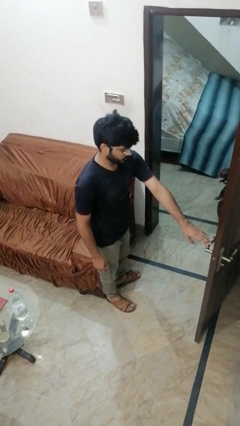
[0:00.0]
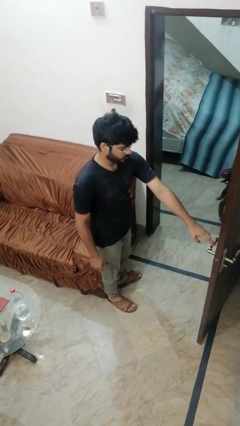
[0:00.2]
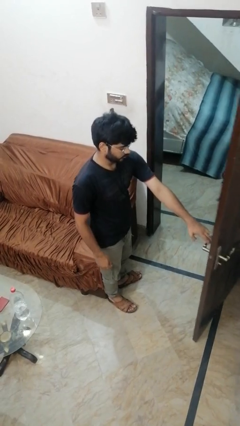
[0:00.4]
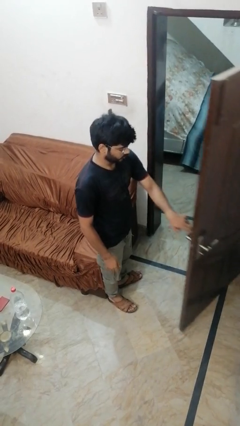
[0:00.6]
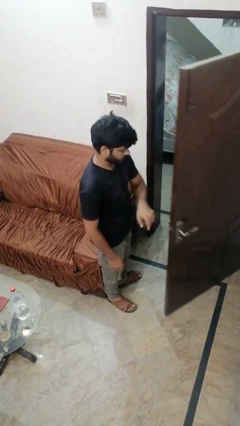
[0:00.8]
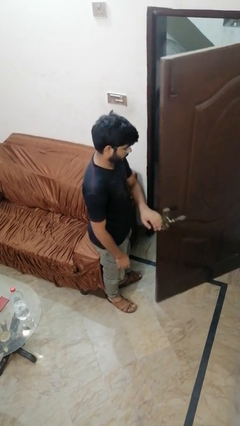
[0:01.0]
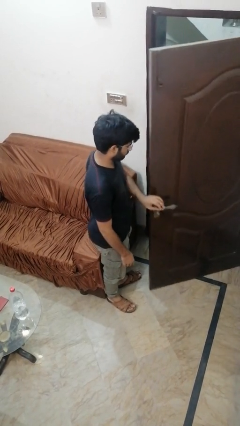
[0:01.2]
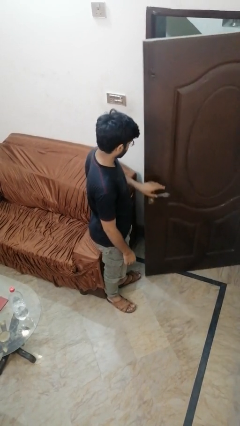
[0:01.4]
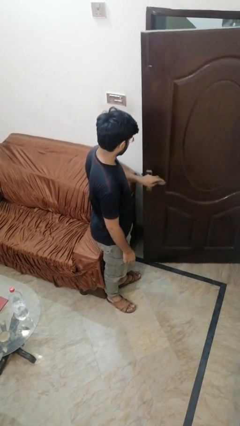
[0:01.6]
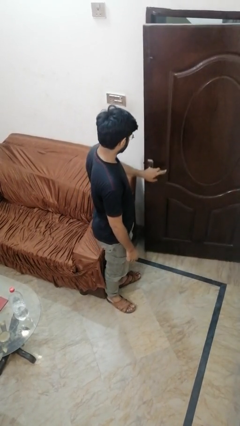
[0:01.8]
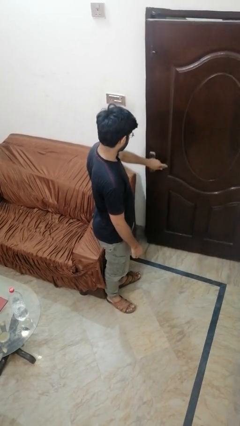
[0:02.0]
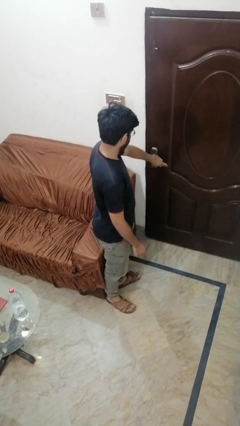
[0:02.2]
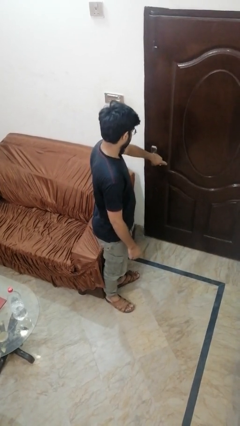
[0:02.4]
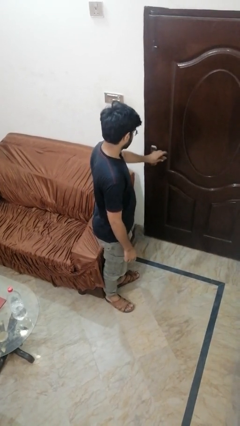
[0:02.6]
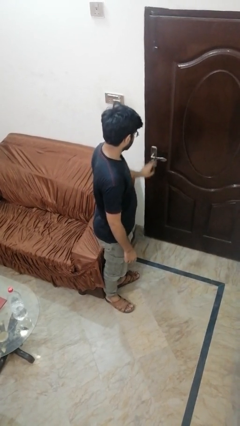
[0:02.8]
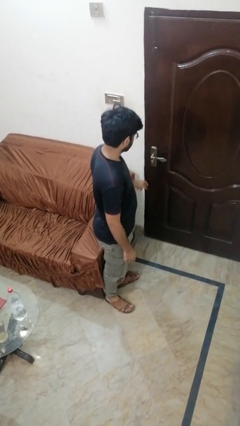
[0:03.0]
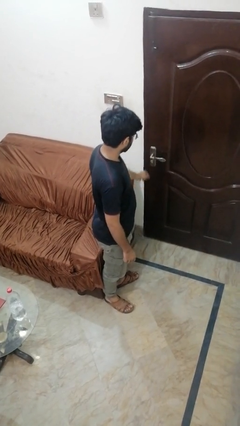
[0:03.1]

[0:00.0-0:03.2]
person closes facility door

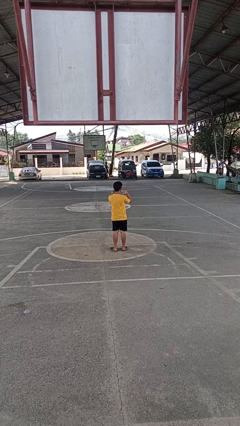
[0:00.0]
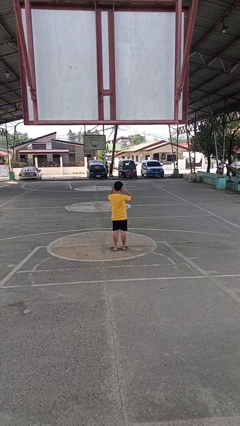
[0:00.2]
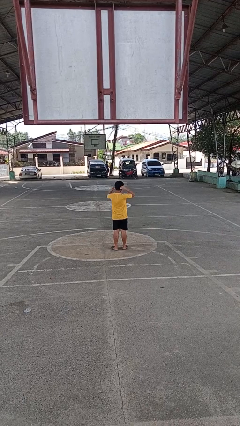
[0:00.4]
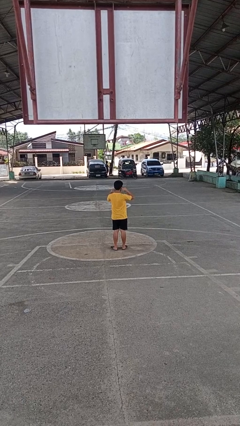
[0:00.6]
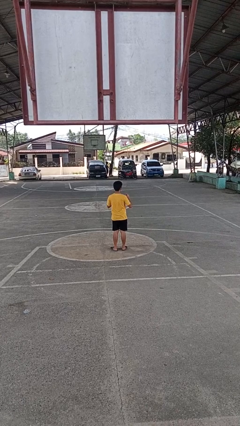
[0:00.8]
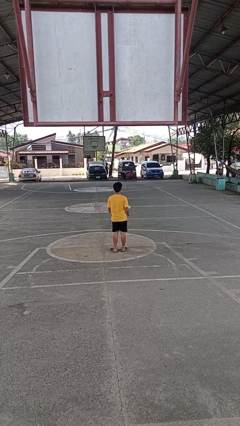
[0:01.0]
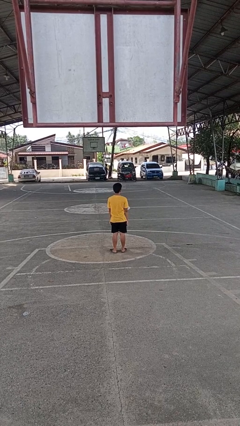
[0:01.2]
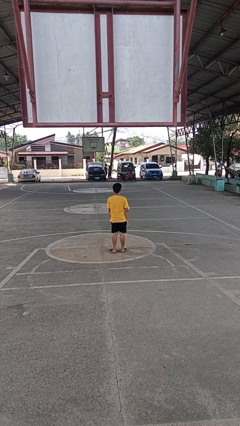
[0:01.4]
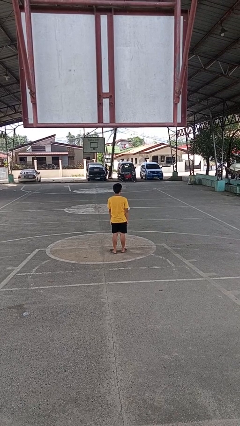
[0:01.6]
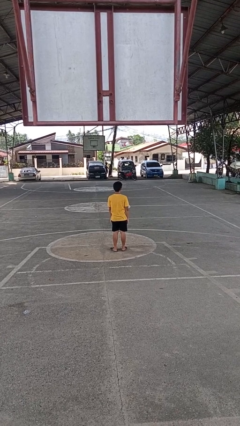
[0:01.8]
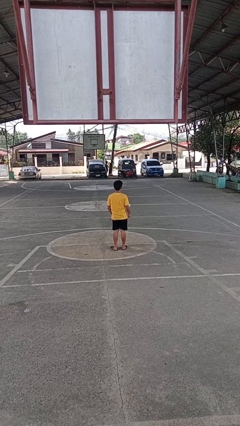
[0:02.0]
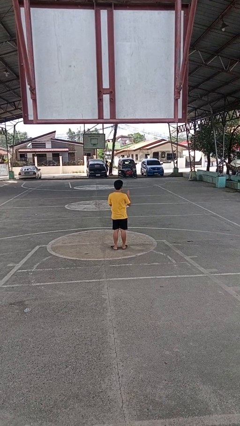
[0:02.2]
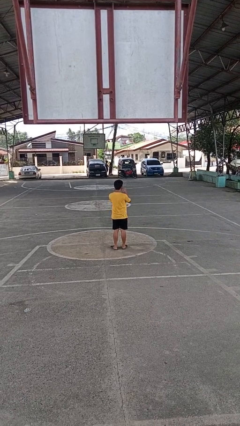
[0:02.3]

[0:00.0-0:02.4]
person puts on facemask

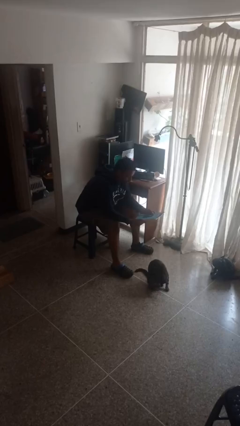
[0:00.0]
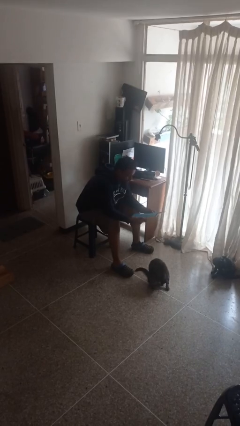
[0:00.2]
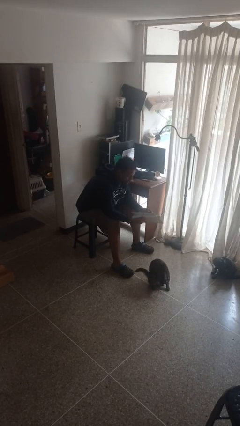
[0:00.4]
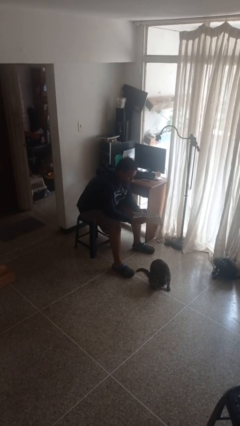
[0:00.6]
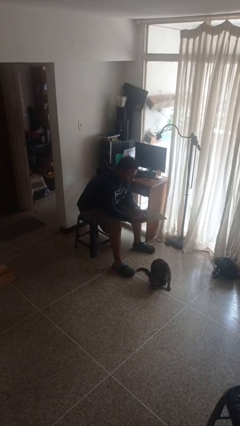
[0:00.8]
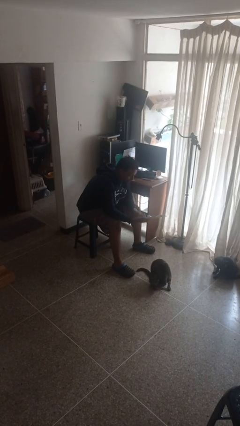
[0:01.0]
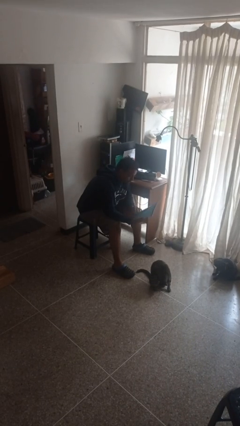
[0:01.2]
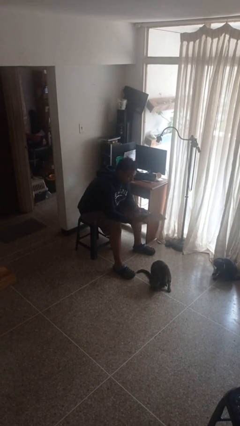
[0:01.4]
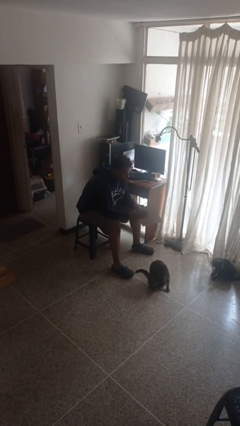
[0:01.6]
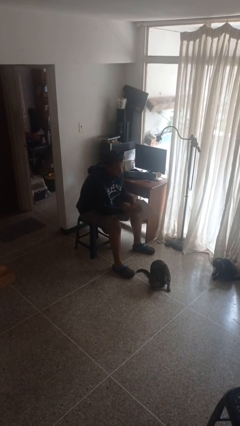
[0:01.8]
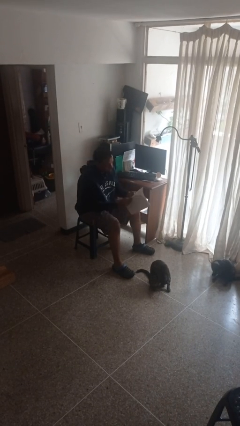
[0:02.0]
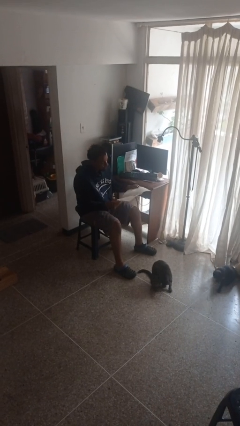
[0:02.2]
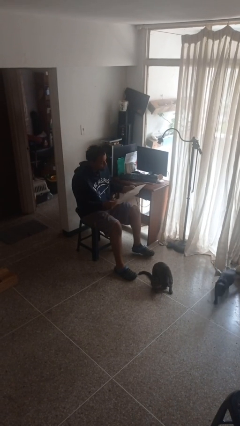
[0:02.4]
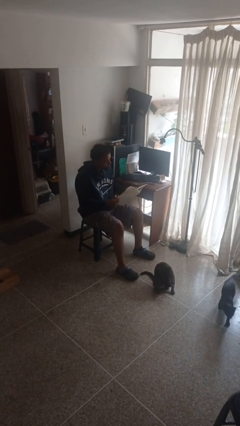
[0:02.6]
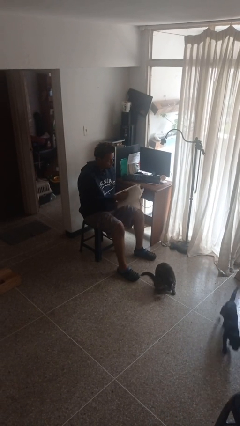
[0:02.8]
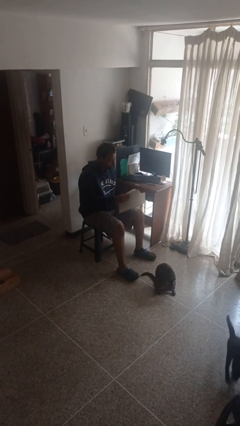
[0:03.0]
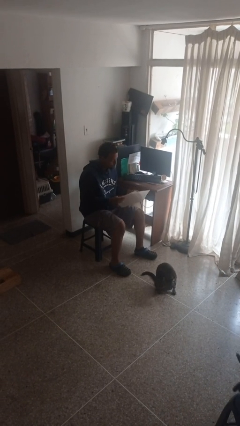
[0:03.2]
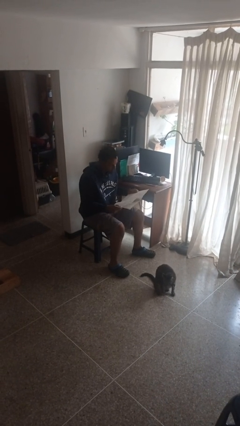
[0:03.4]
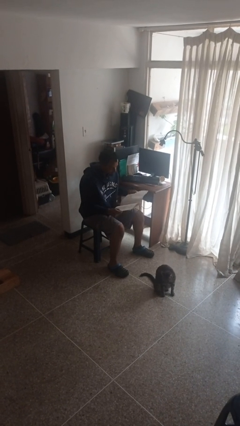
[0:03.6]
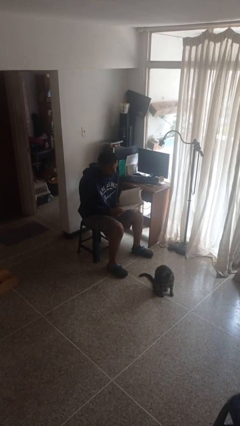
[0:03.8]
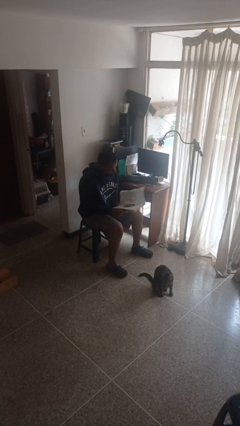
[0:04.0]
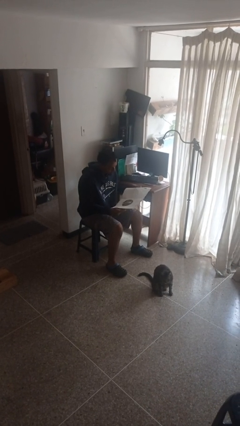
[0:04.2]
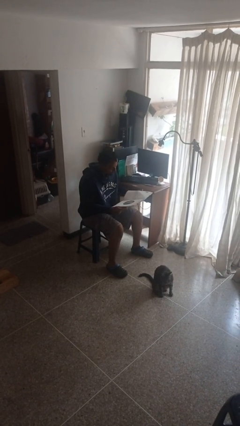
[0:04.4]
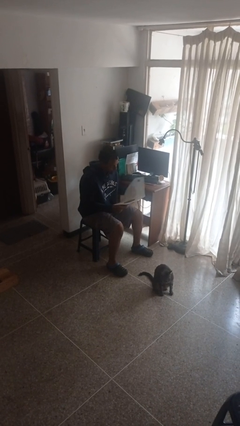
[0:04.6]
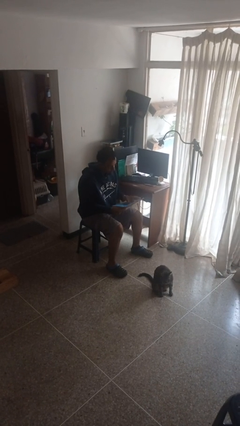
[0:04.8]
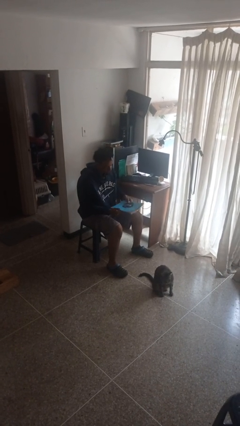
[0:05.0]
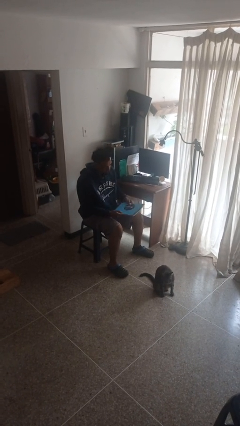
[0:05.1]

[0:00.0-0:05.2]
person reads magazine

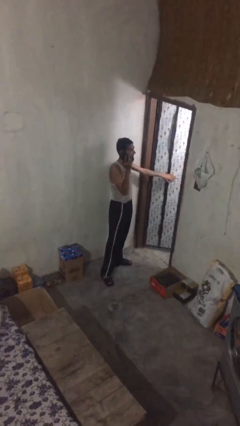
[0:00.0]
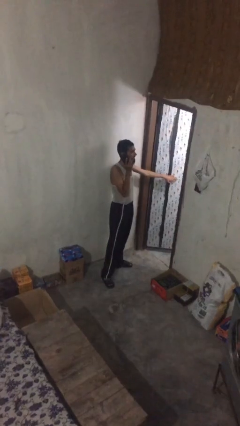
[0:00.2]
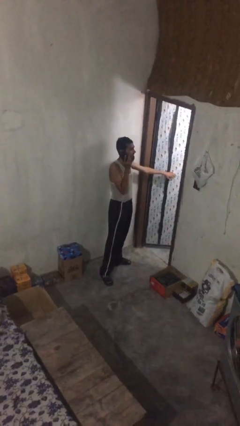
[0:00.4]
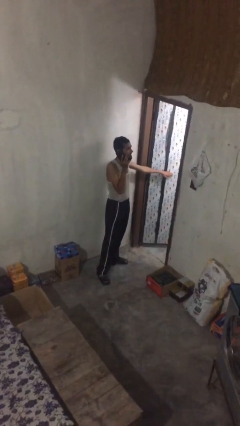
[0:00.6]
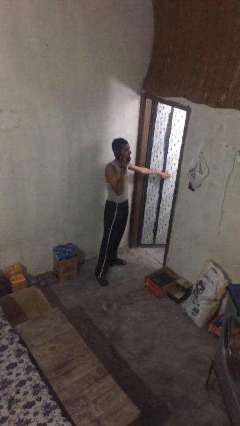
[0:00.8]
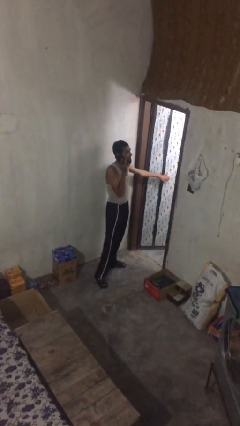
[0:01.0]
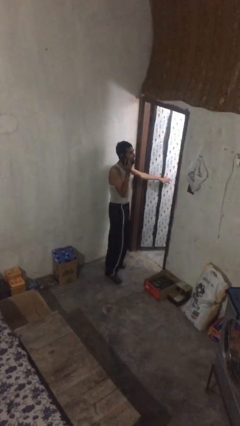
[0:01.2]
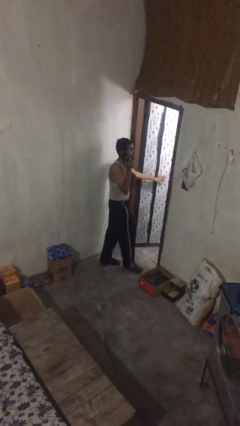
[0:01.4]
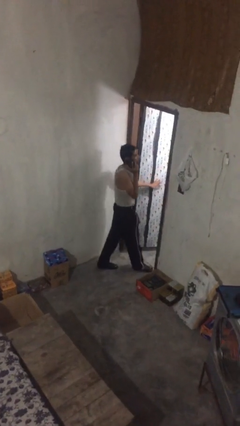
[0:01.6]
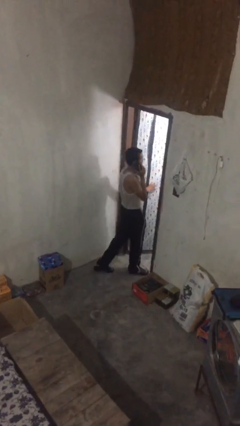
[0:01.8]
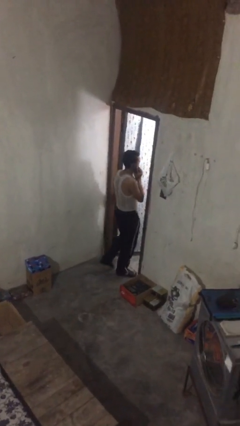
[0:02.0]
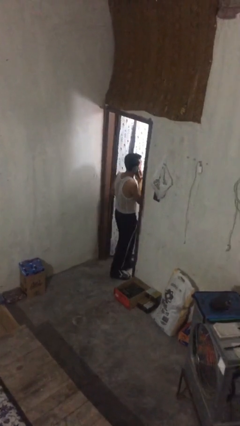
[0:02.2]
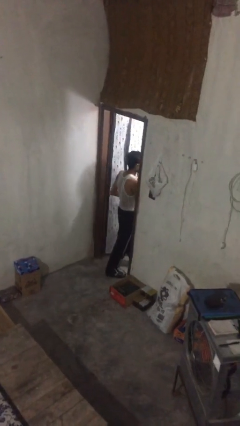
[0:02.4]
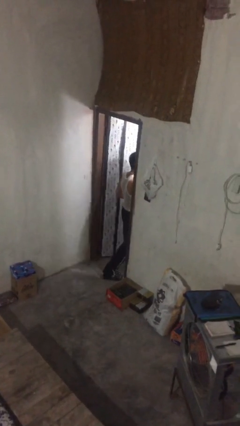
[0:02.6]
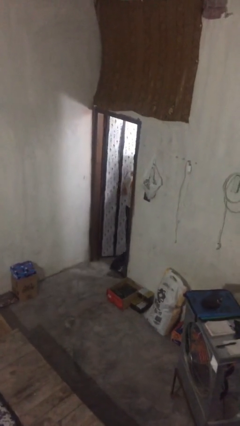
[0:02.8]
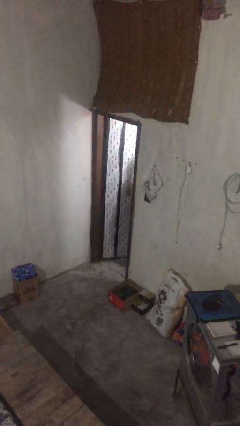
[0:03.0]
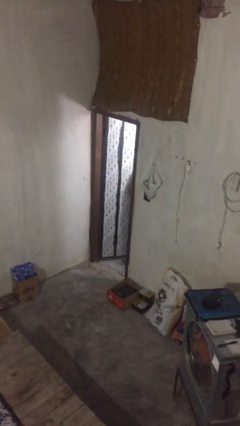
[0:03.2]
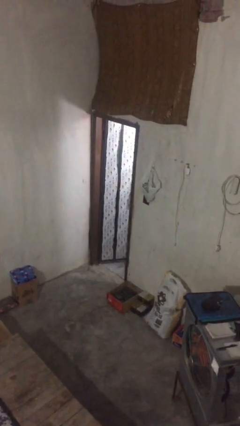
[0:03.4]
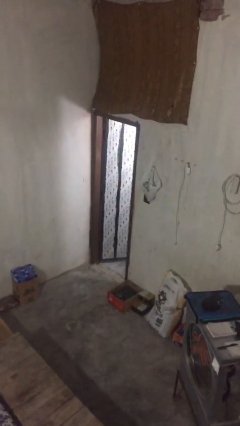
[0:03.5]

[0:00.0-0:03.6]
person exits scene through structure

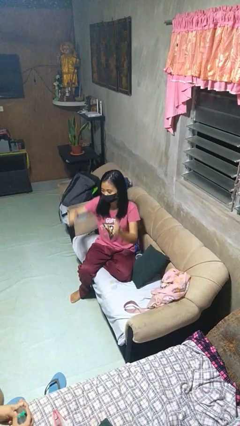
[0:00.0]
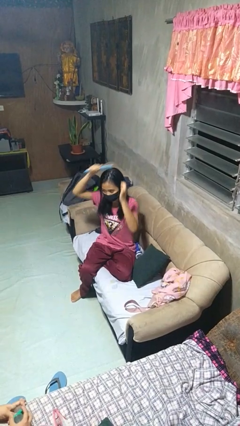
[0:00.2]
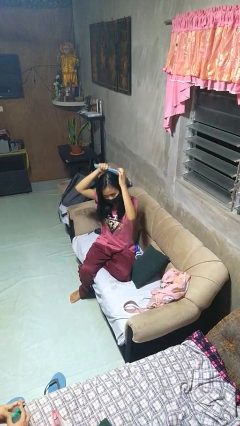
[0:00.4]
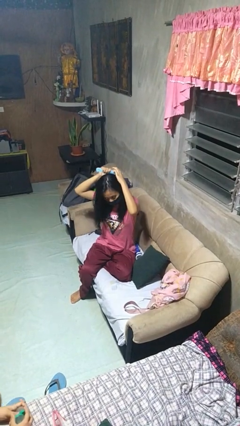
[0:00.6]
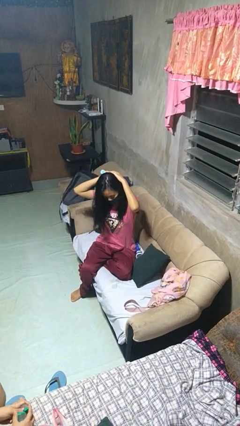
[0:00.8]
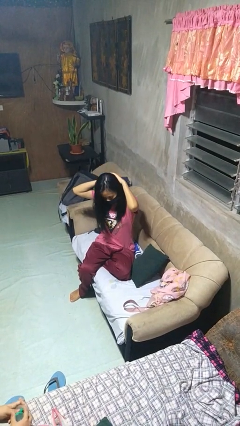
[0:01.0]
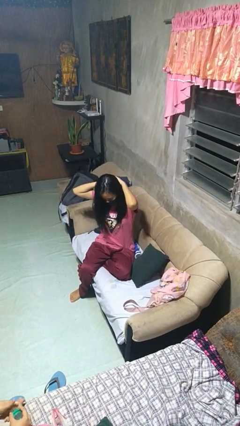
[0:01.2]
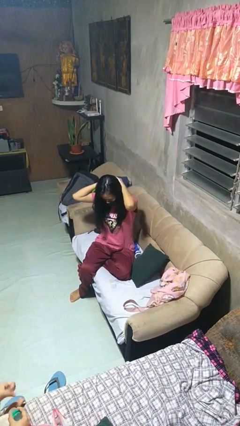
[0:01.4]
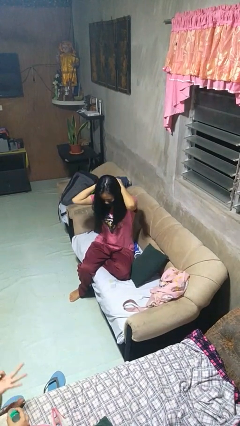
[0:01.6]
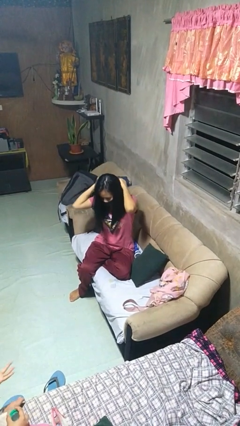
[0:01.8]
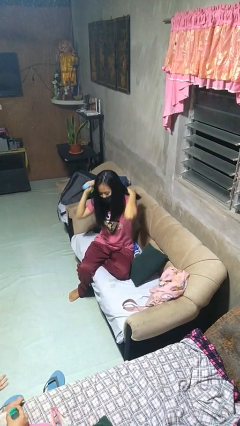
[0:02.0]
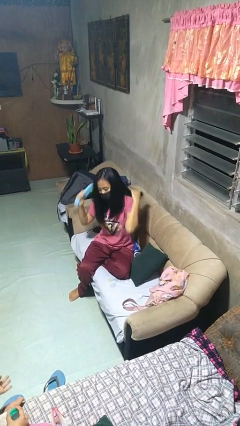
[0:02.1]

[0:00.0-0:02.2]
person brushes hair

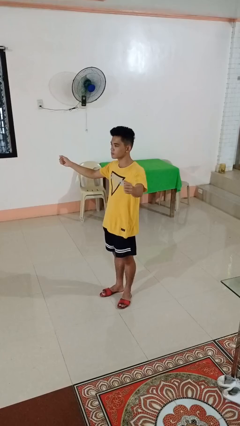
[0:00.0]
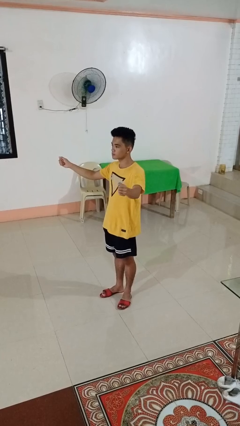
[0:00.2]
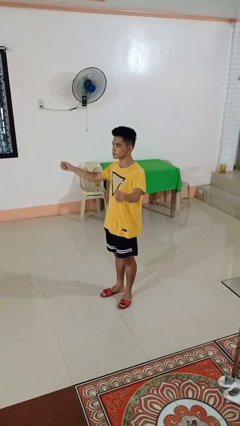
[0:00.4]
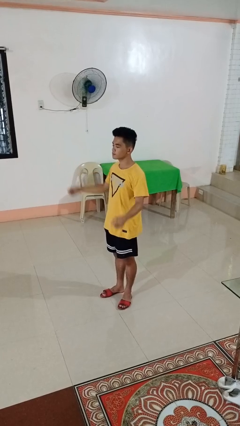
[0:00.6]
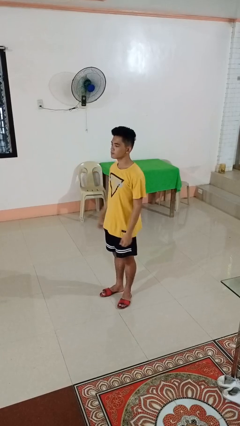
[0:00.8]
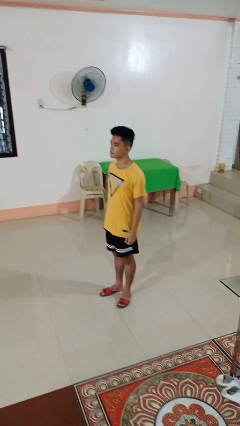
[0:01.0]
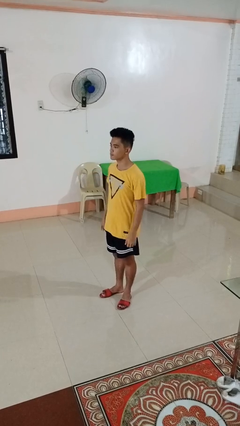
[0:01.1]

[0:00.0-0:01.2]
person gestures zoom out
